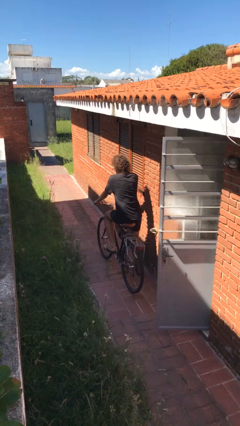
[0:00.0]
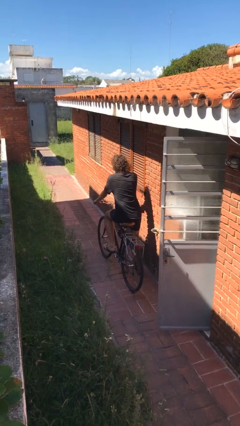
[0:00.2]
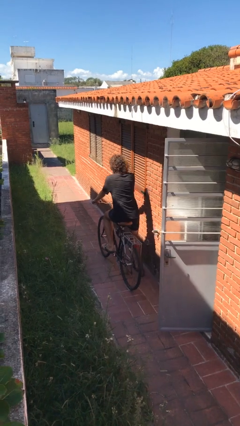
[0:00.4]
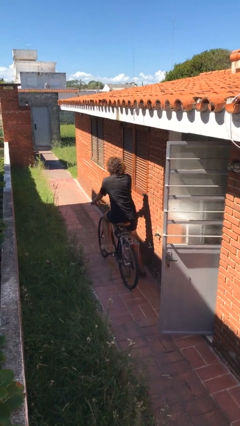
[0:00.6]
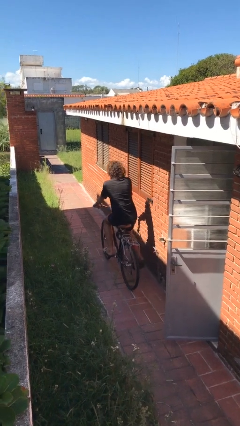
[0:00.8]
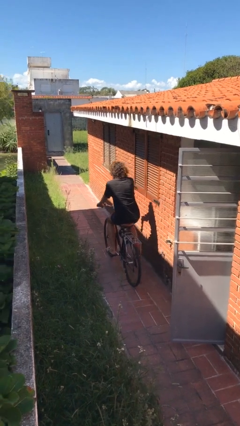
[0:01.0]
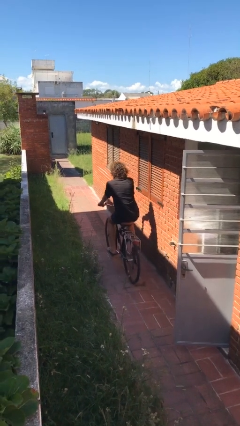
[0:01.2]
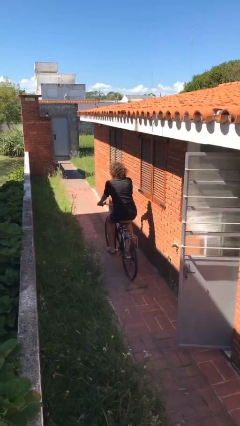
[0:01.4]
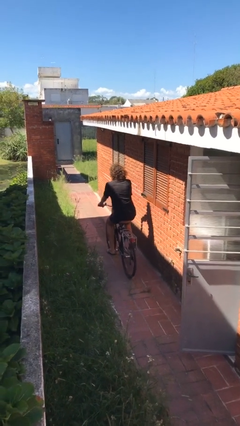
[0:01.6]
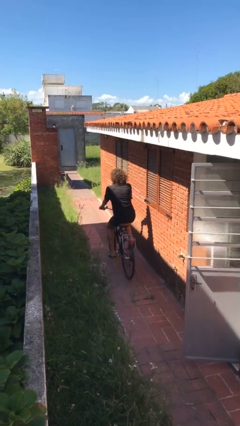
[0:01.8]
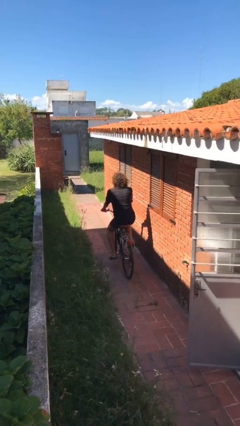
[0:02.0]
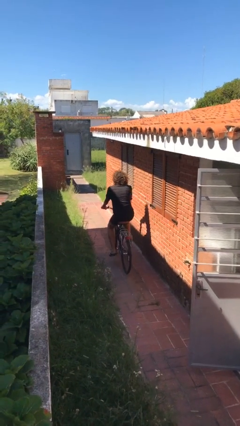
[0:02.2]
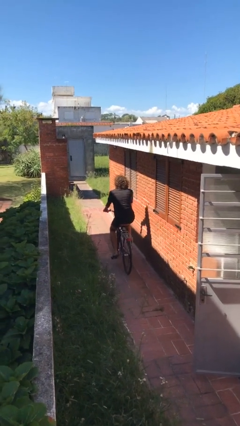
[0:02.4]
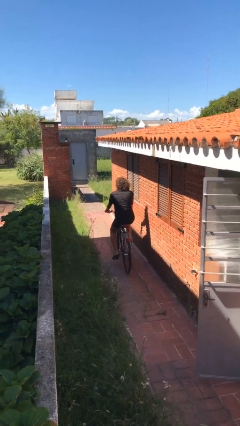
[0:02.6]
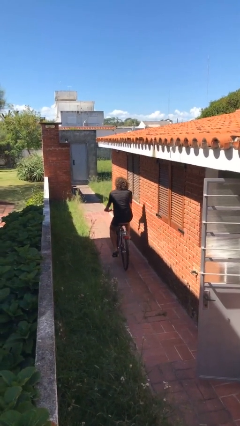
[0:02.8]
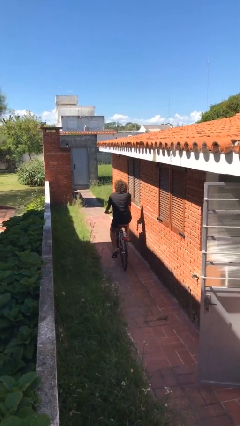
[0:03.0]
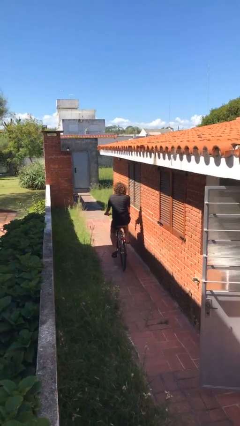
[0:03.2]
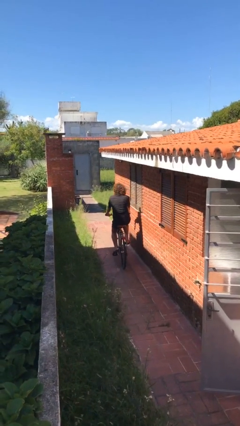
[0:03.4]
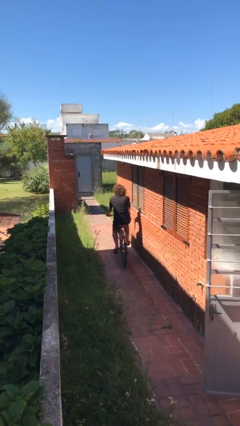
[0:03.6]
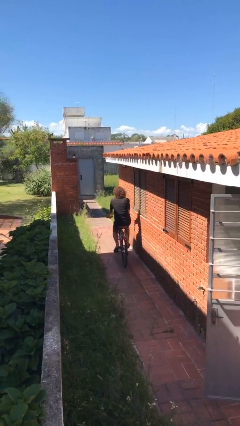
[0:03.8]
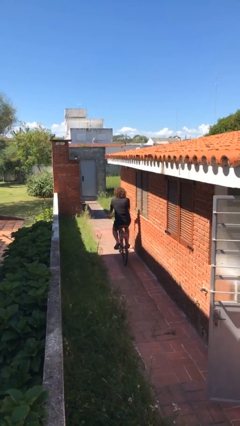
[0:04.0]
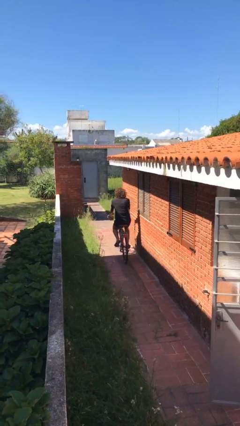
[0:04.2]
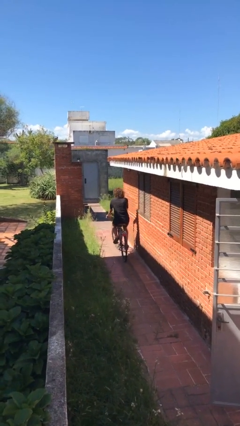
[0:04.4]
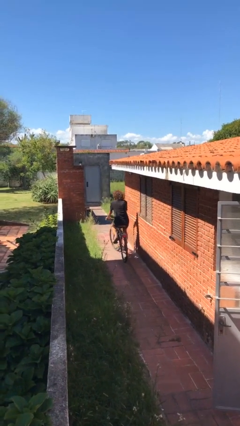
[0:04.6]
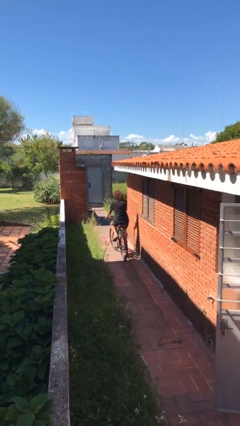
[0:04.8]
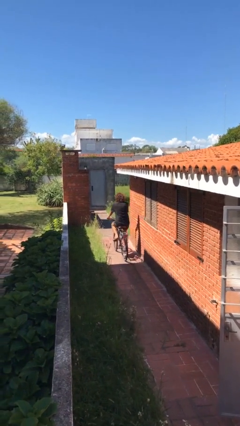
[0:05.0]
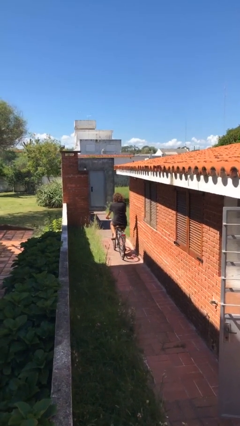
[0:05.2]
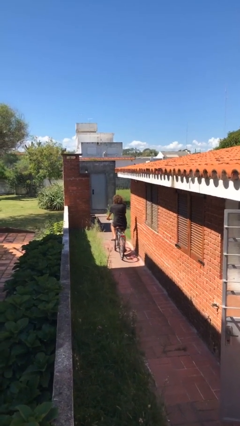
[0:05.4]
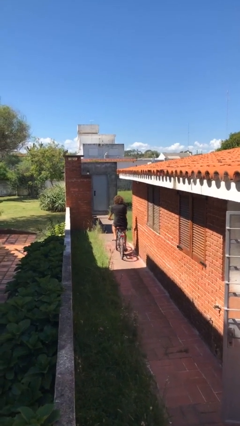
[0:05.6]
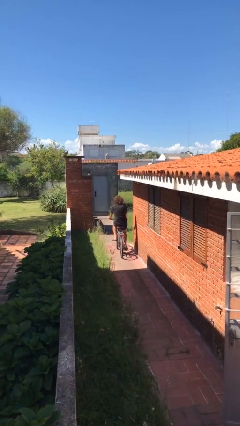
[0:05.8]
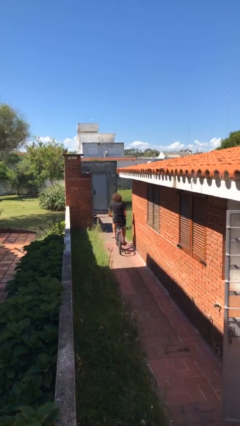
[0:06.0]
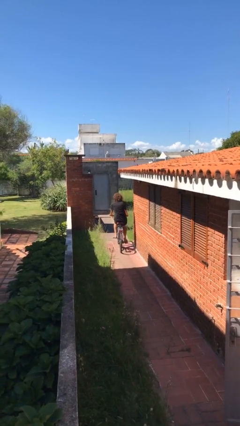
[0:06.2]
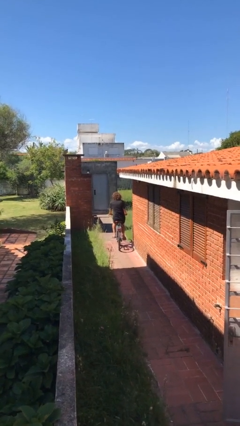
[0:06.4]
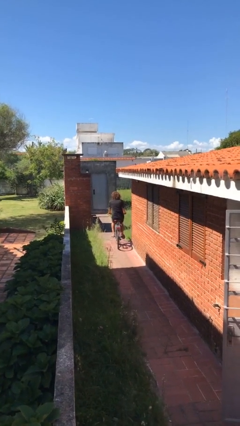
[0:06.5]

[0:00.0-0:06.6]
person rides bicycle

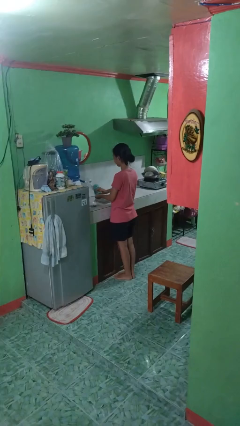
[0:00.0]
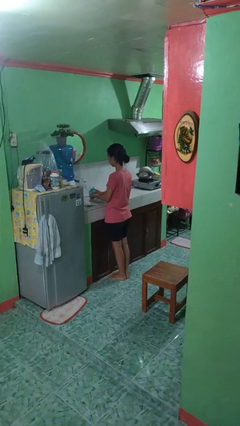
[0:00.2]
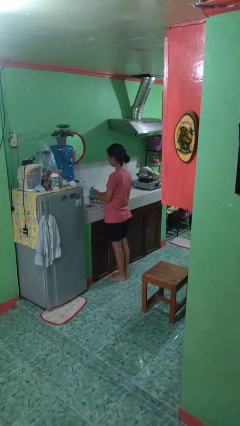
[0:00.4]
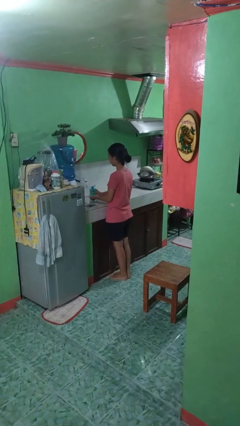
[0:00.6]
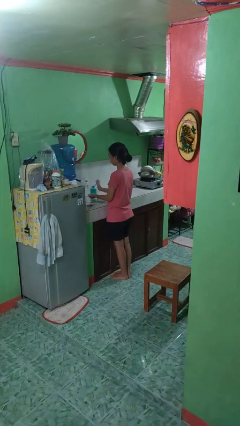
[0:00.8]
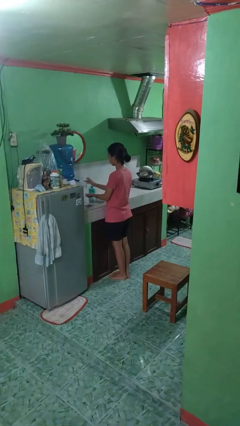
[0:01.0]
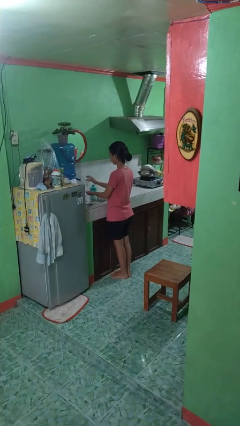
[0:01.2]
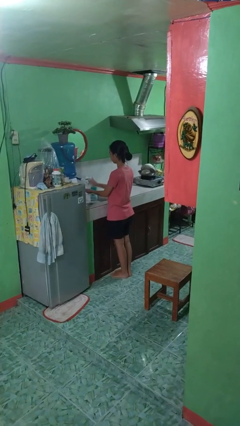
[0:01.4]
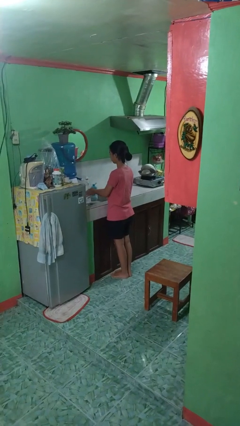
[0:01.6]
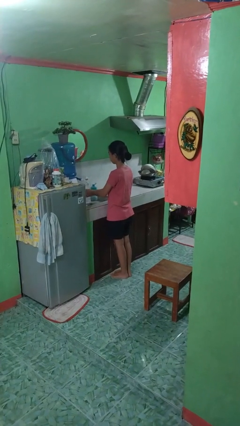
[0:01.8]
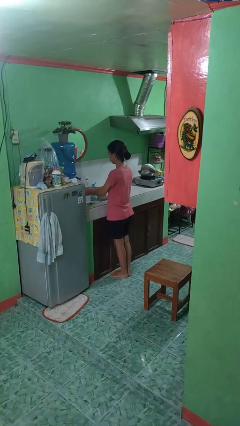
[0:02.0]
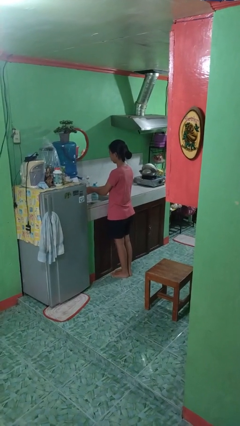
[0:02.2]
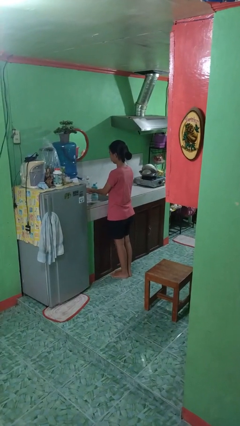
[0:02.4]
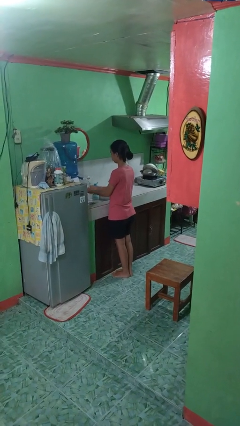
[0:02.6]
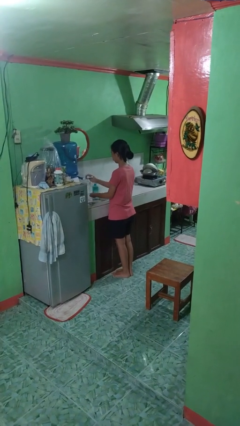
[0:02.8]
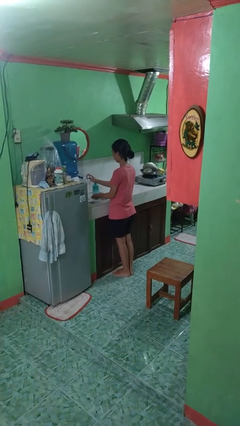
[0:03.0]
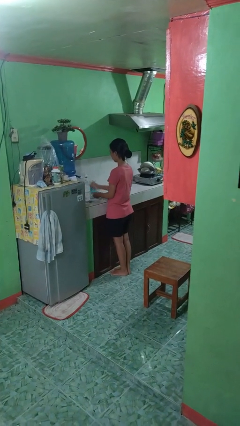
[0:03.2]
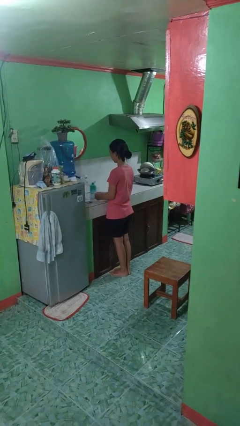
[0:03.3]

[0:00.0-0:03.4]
person washes hands

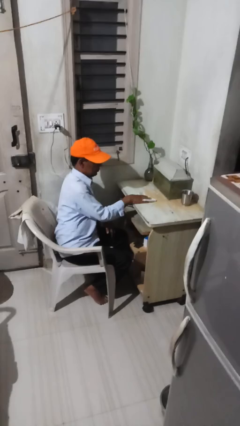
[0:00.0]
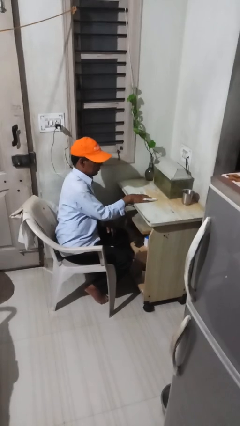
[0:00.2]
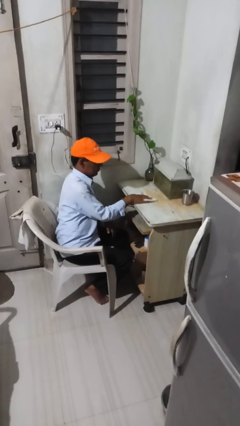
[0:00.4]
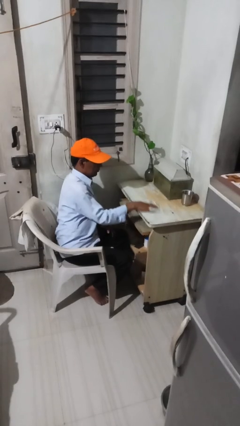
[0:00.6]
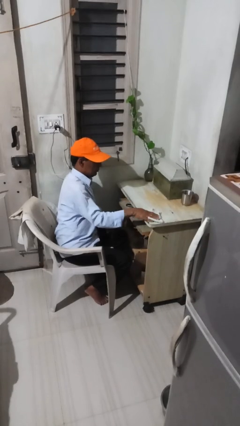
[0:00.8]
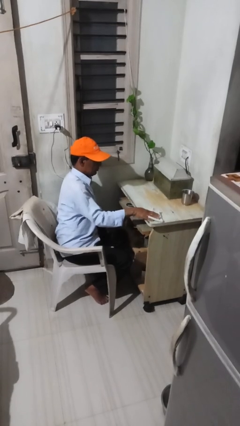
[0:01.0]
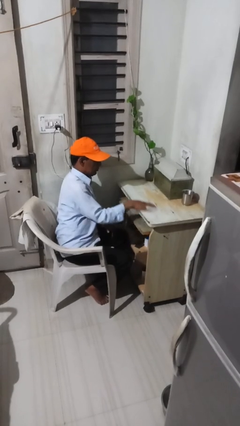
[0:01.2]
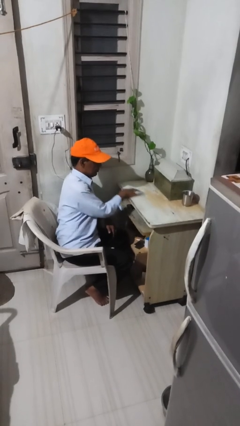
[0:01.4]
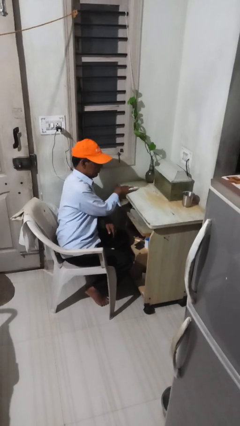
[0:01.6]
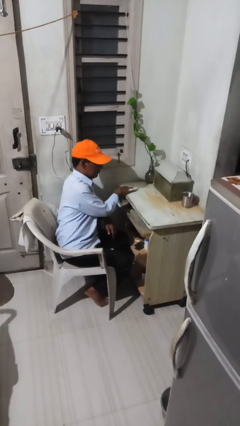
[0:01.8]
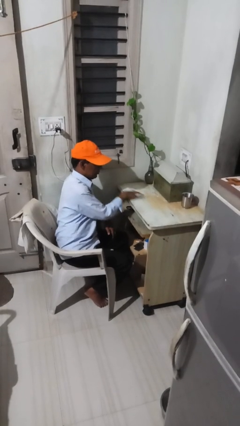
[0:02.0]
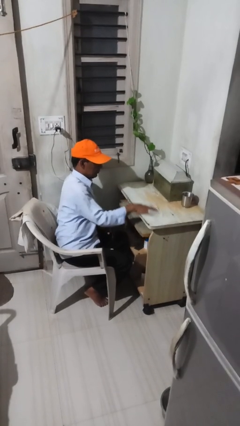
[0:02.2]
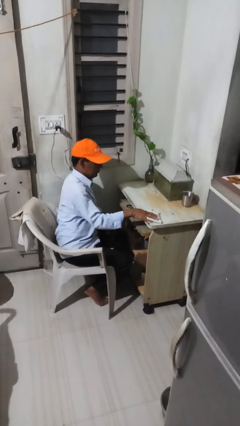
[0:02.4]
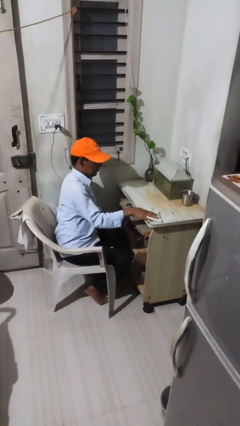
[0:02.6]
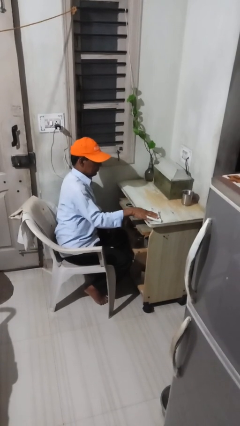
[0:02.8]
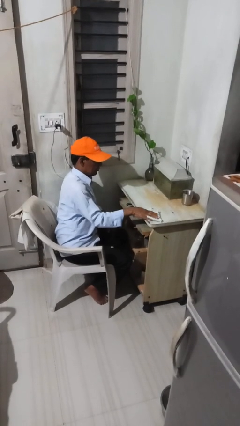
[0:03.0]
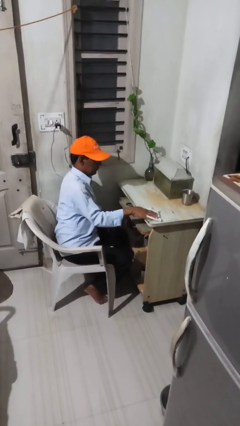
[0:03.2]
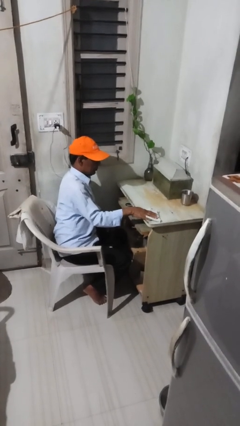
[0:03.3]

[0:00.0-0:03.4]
person cleans table with rag

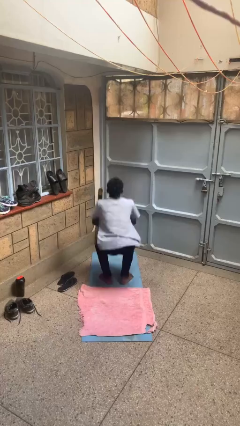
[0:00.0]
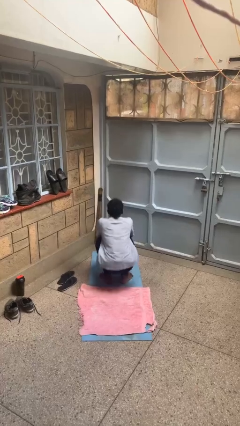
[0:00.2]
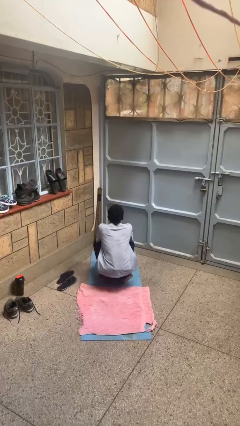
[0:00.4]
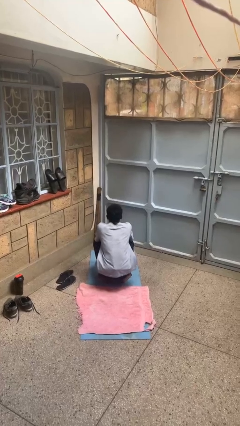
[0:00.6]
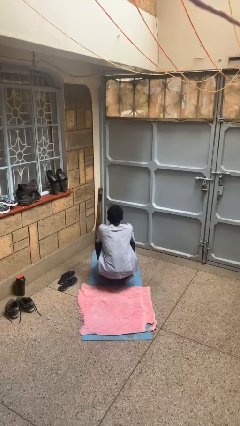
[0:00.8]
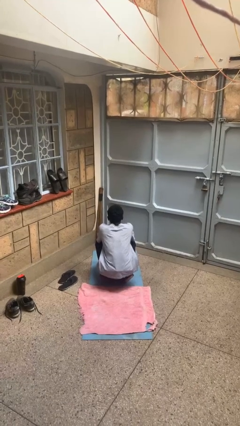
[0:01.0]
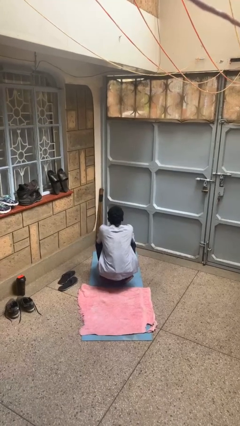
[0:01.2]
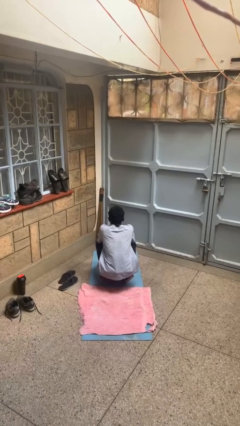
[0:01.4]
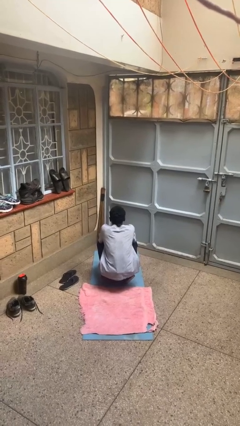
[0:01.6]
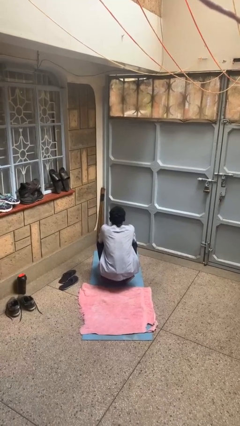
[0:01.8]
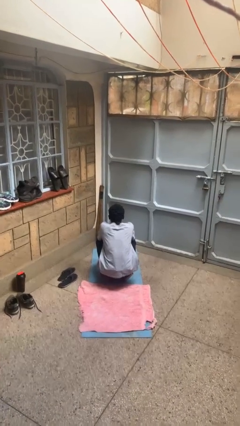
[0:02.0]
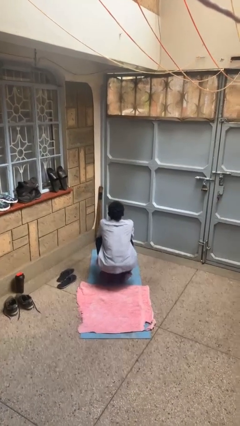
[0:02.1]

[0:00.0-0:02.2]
person squats

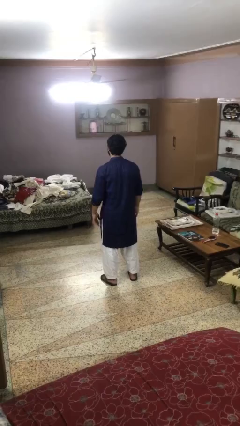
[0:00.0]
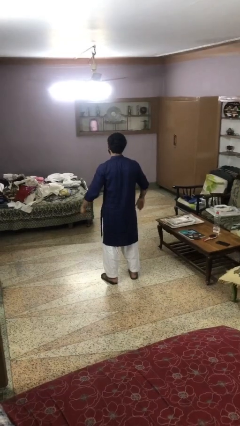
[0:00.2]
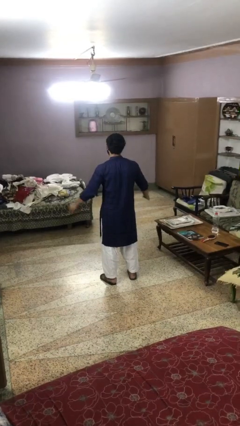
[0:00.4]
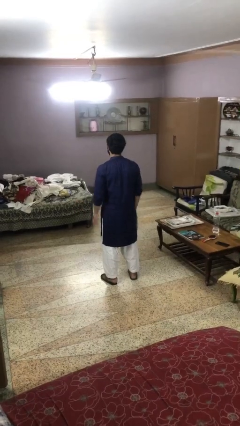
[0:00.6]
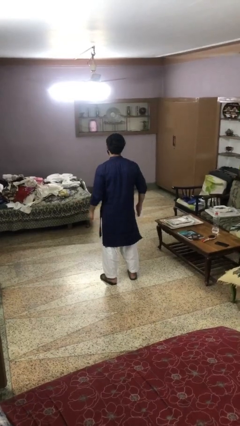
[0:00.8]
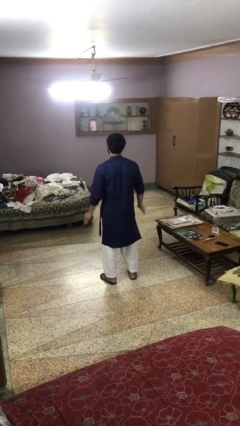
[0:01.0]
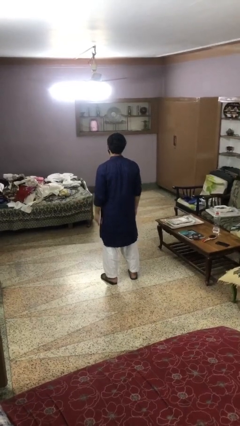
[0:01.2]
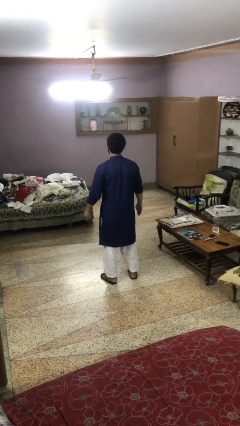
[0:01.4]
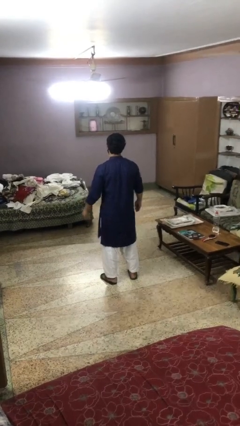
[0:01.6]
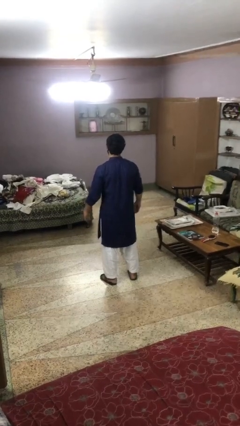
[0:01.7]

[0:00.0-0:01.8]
person slaps hands on thighs

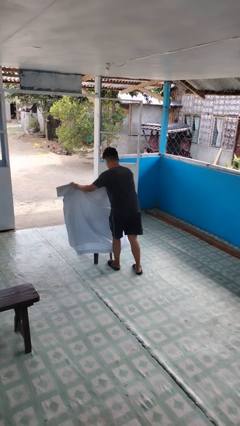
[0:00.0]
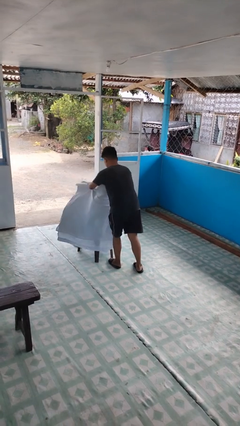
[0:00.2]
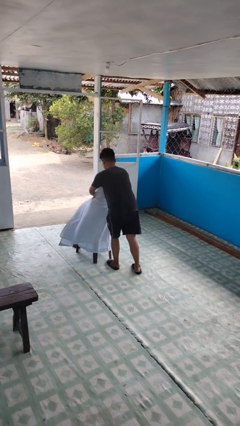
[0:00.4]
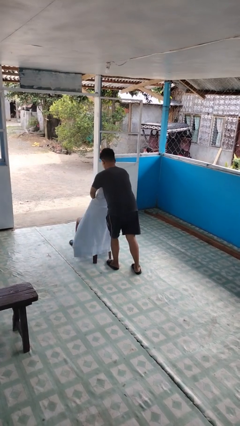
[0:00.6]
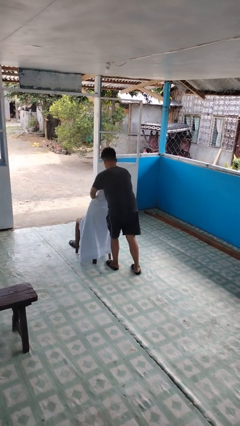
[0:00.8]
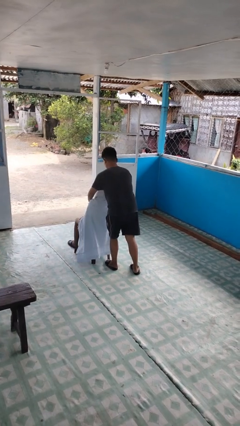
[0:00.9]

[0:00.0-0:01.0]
person covers friend with blanket
